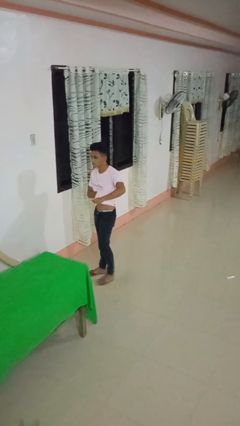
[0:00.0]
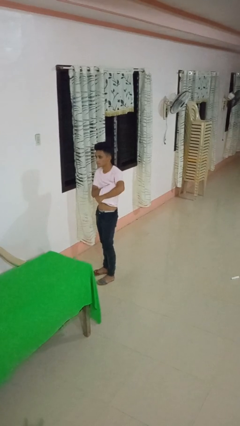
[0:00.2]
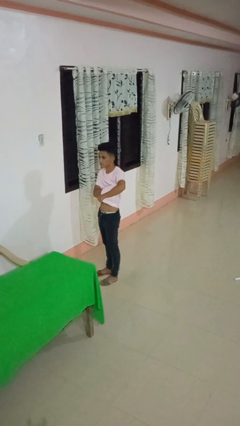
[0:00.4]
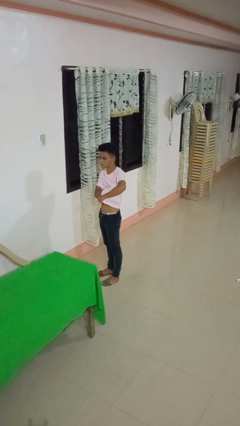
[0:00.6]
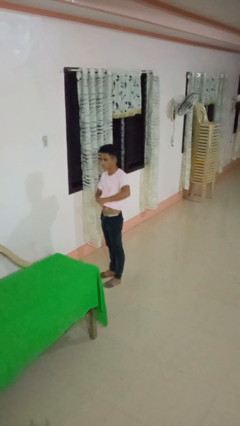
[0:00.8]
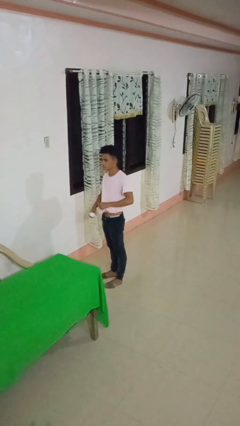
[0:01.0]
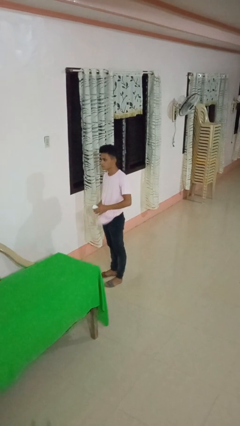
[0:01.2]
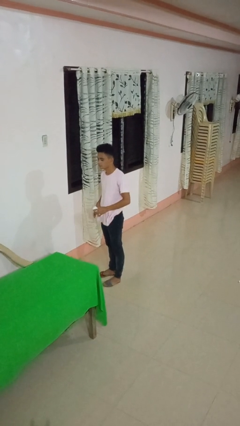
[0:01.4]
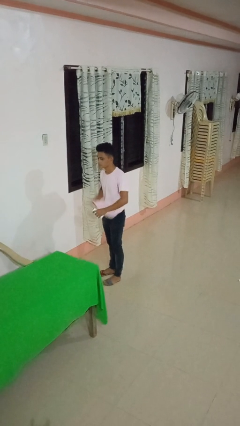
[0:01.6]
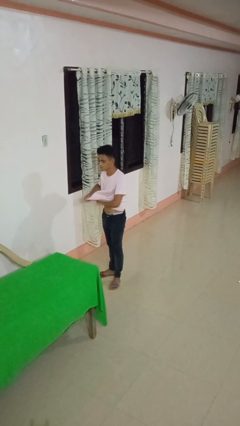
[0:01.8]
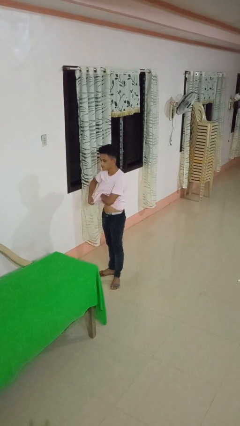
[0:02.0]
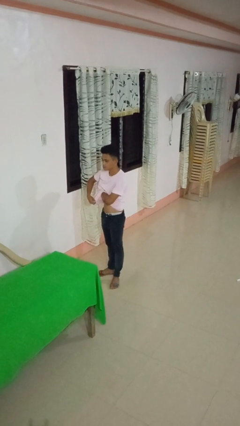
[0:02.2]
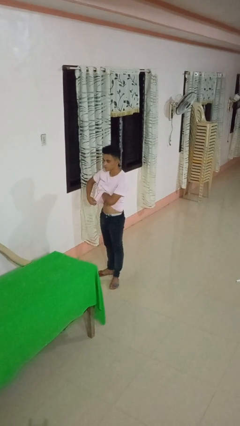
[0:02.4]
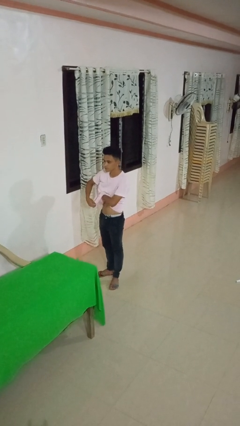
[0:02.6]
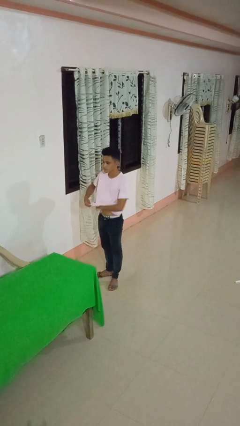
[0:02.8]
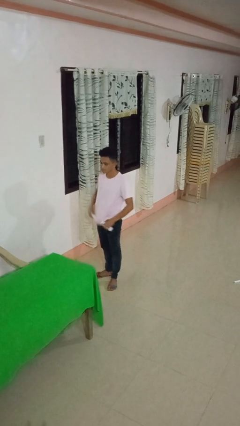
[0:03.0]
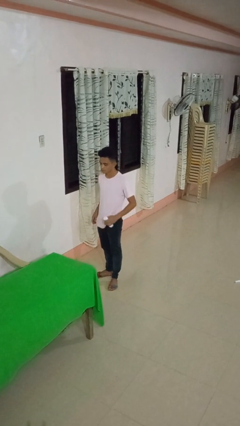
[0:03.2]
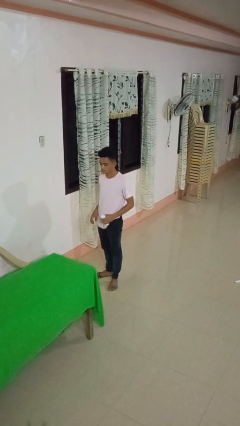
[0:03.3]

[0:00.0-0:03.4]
person applies deodorant

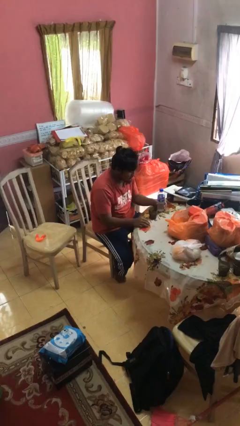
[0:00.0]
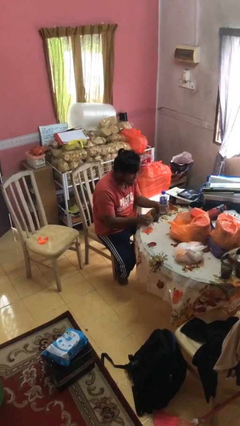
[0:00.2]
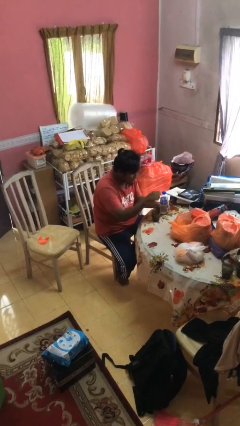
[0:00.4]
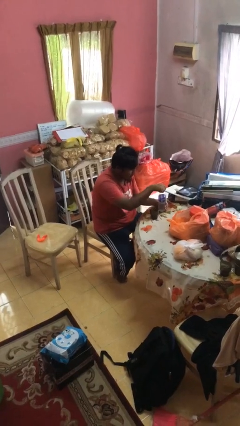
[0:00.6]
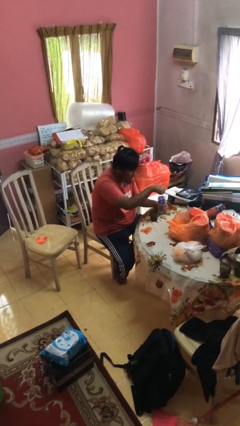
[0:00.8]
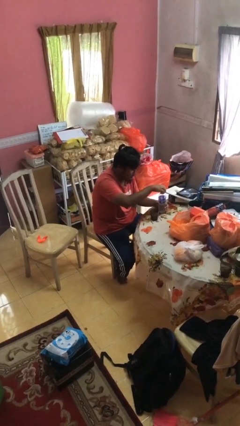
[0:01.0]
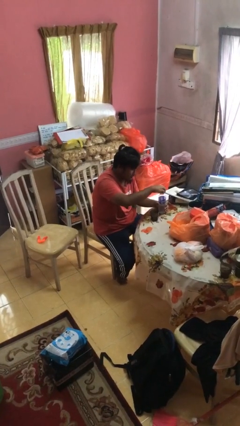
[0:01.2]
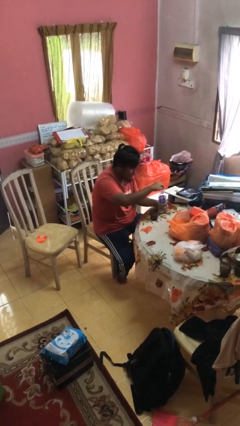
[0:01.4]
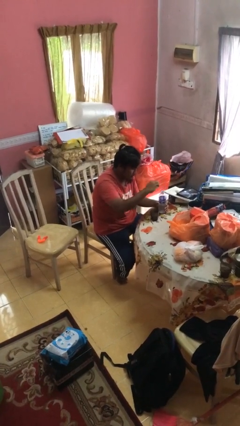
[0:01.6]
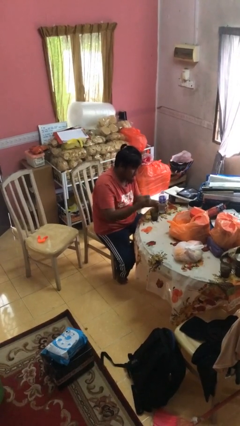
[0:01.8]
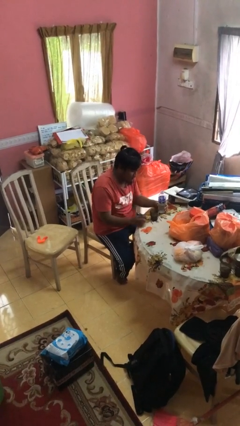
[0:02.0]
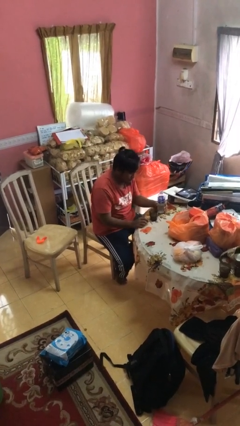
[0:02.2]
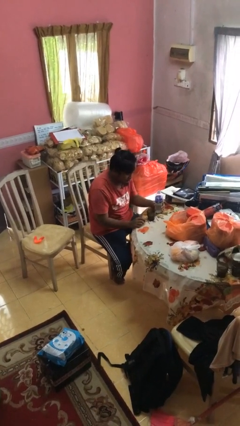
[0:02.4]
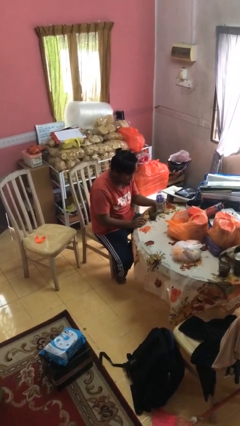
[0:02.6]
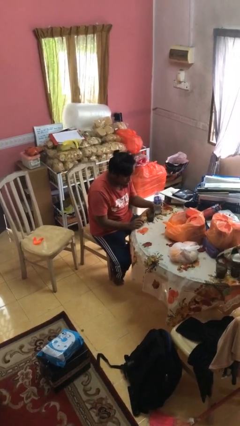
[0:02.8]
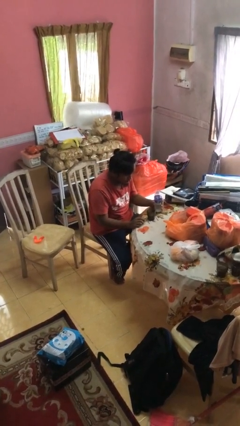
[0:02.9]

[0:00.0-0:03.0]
person unscrews lid from bottle

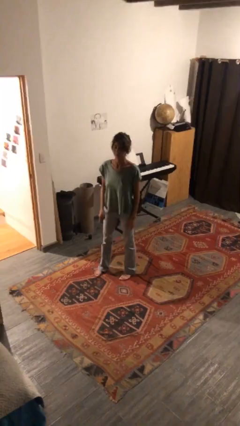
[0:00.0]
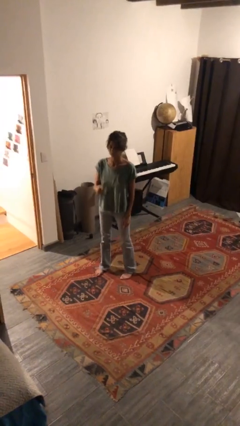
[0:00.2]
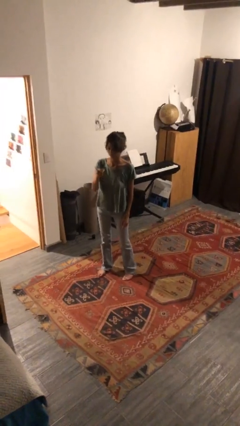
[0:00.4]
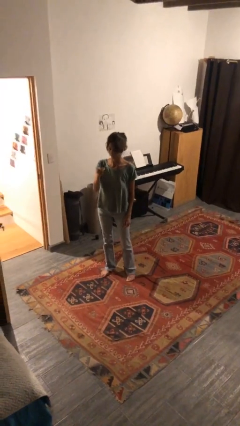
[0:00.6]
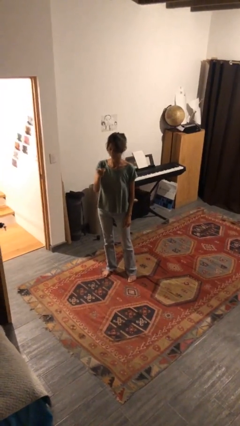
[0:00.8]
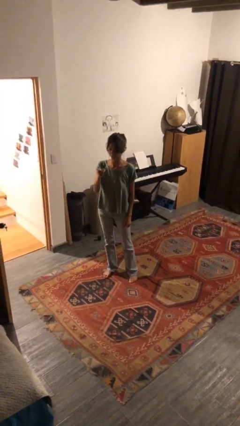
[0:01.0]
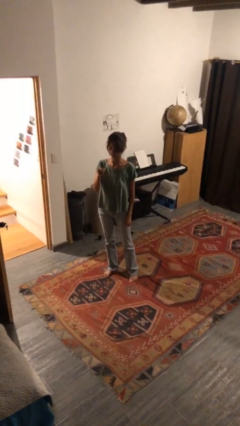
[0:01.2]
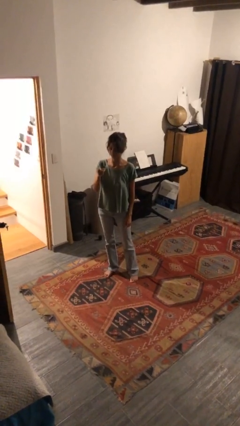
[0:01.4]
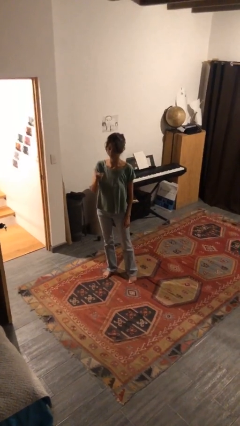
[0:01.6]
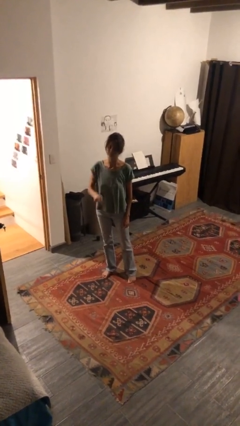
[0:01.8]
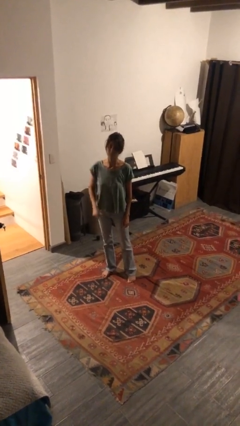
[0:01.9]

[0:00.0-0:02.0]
person points at person

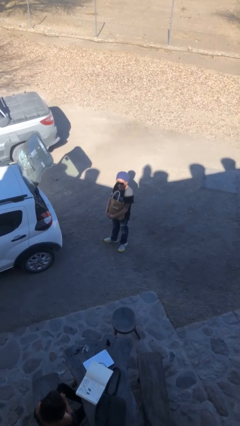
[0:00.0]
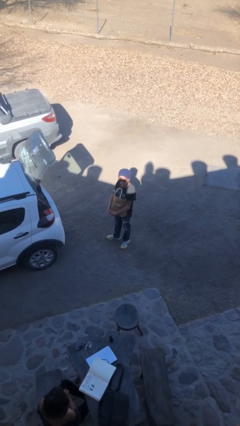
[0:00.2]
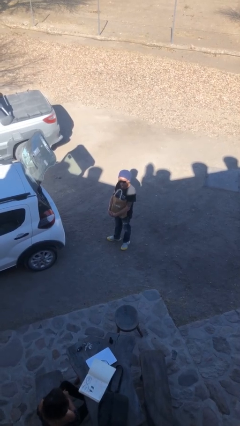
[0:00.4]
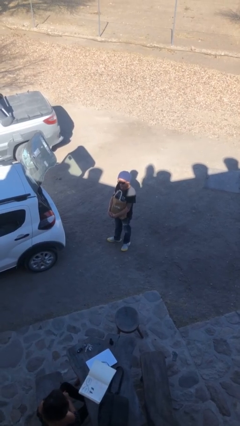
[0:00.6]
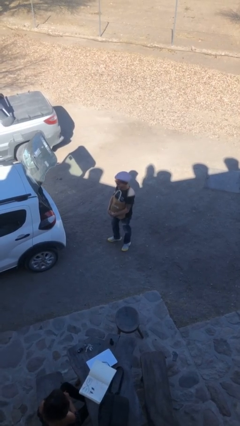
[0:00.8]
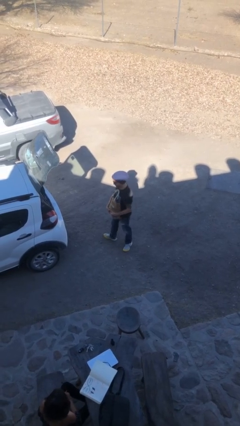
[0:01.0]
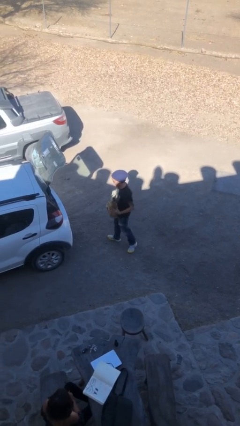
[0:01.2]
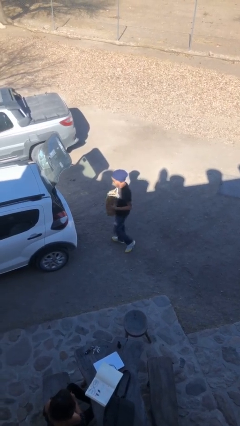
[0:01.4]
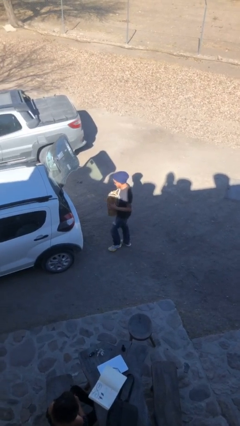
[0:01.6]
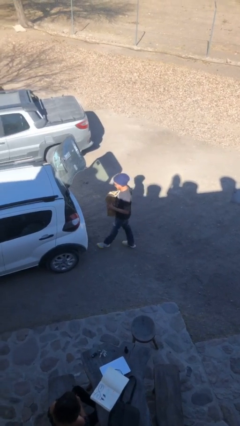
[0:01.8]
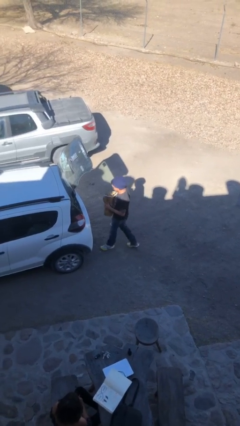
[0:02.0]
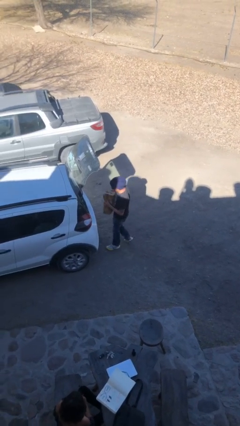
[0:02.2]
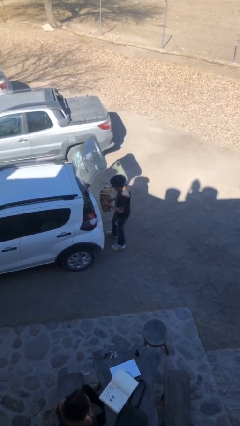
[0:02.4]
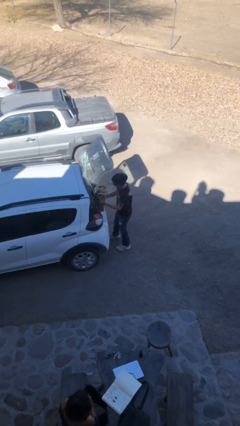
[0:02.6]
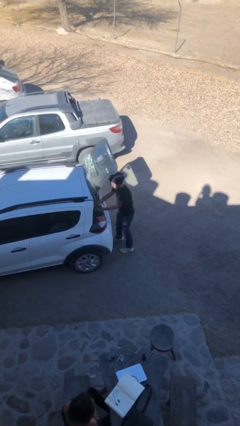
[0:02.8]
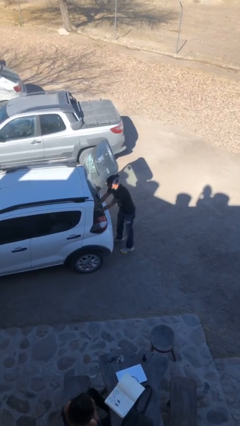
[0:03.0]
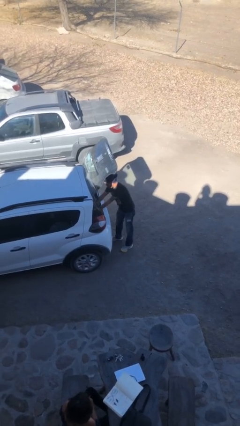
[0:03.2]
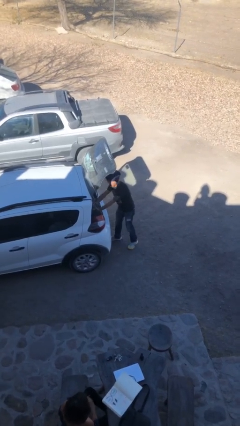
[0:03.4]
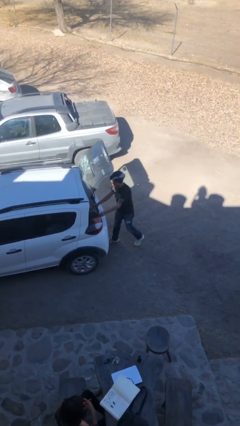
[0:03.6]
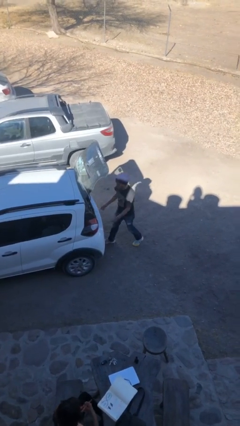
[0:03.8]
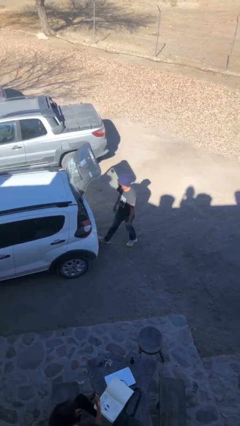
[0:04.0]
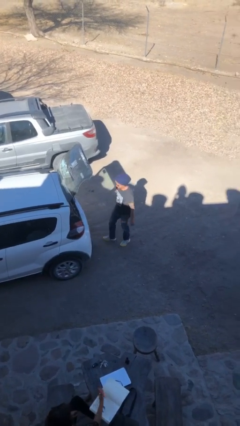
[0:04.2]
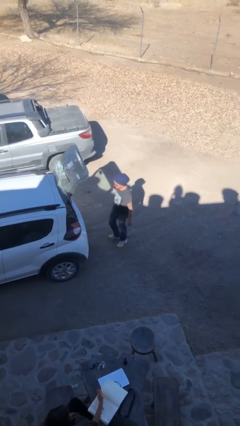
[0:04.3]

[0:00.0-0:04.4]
person loads car

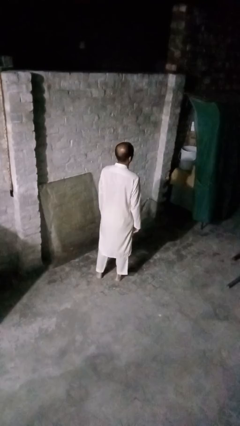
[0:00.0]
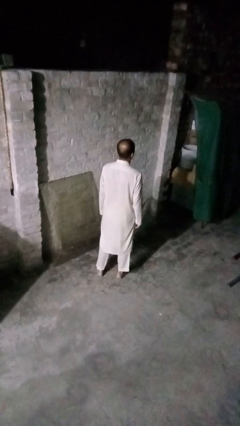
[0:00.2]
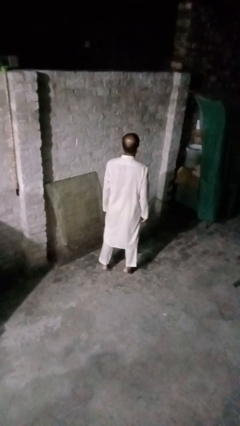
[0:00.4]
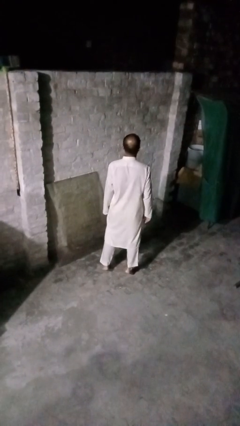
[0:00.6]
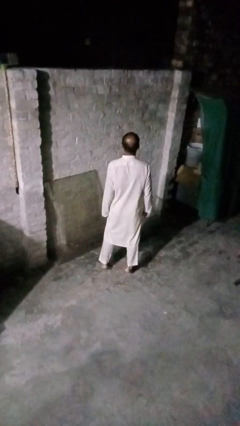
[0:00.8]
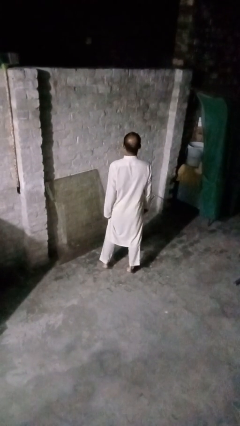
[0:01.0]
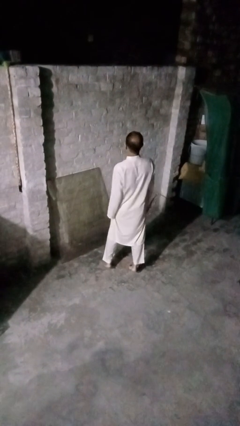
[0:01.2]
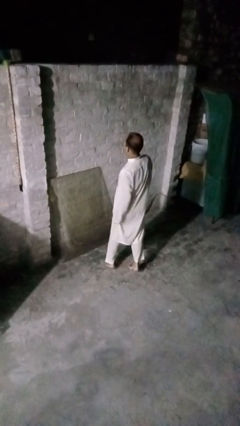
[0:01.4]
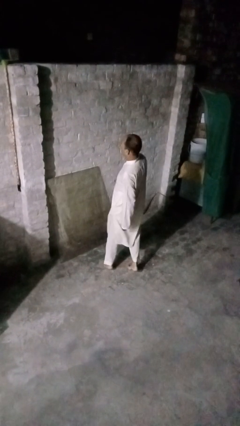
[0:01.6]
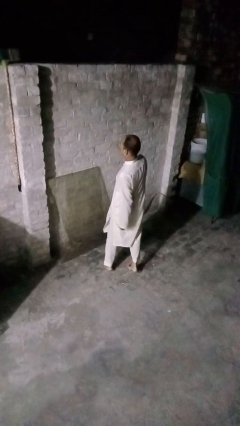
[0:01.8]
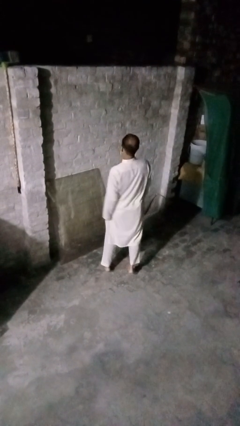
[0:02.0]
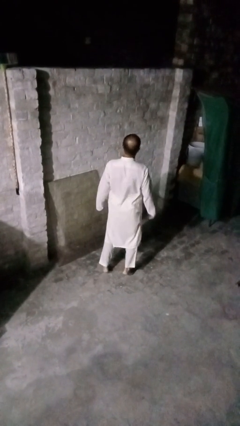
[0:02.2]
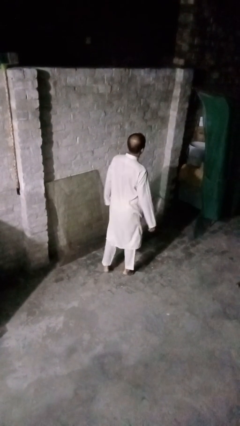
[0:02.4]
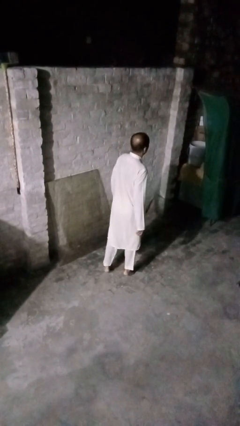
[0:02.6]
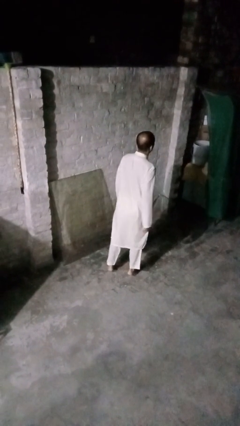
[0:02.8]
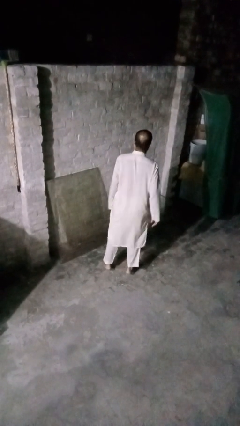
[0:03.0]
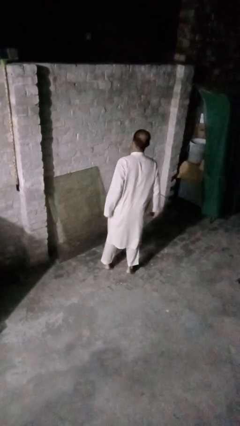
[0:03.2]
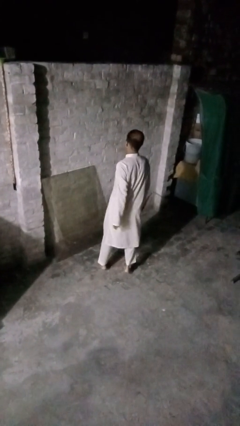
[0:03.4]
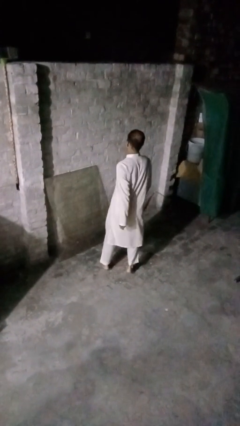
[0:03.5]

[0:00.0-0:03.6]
person twirls

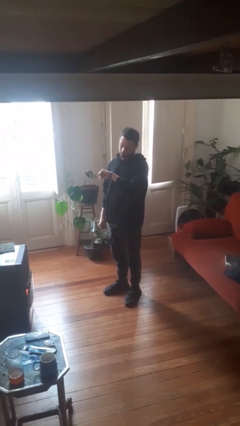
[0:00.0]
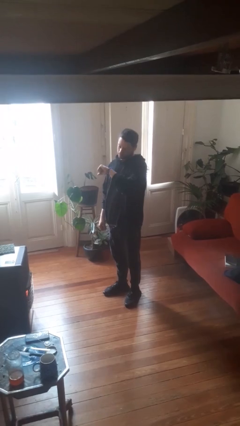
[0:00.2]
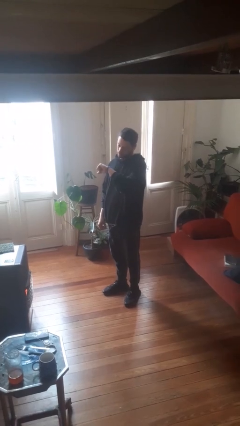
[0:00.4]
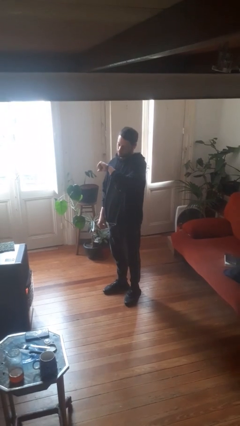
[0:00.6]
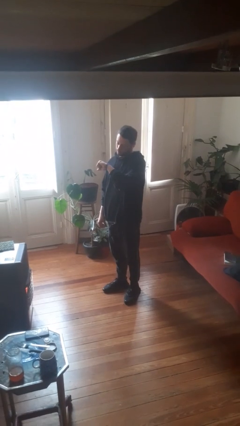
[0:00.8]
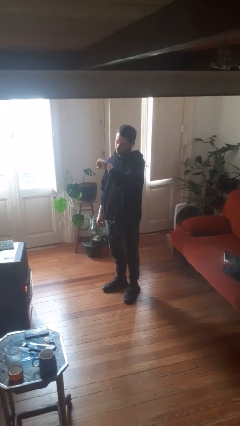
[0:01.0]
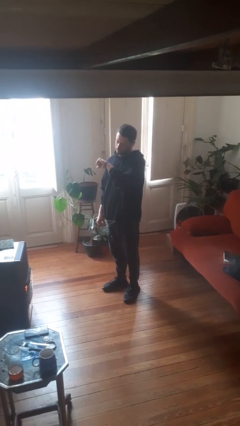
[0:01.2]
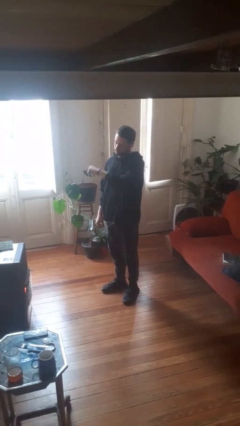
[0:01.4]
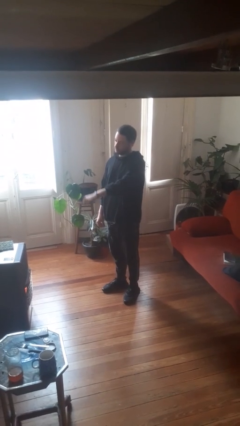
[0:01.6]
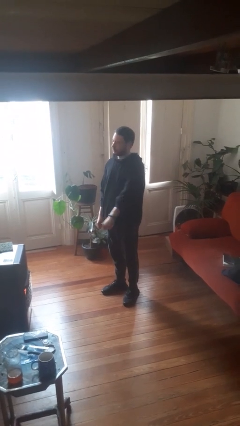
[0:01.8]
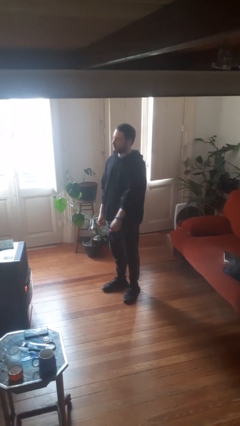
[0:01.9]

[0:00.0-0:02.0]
person looks at wristwatch
